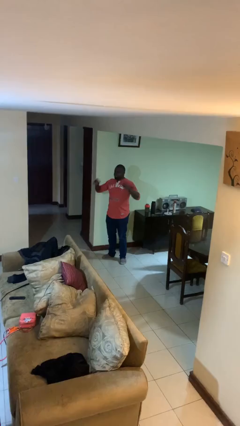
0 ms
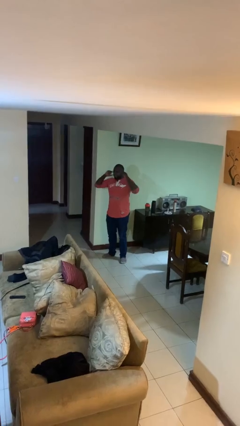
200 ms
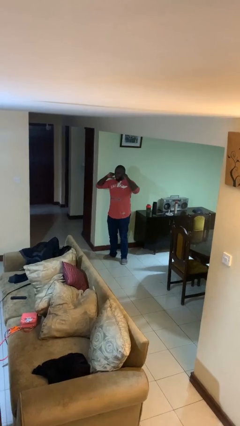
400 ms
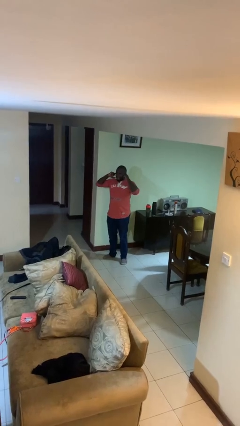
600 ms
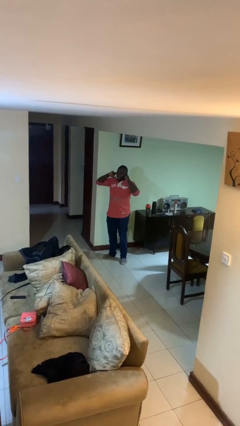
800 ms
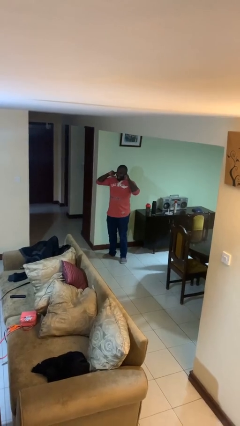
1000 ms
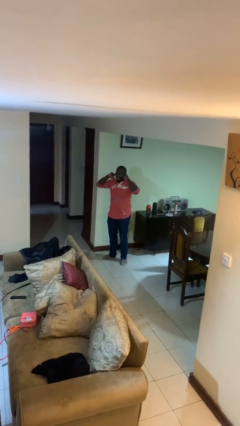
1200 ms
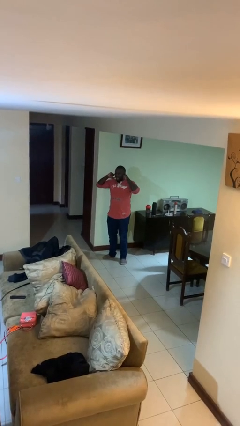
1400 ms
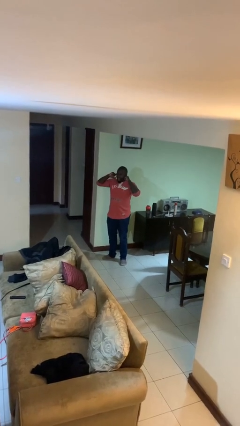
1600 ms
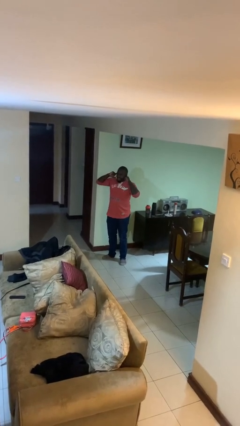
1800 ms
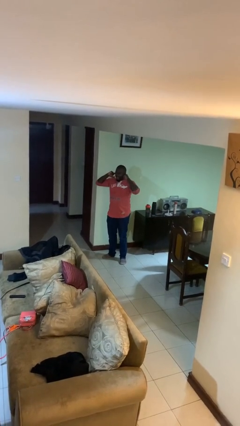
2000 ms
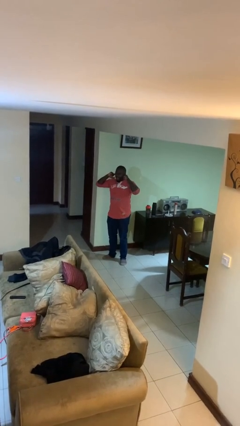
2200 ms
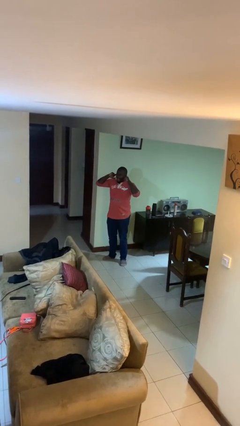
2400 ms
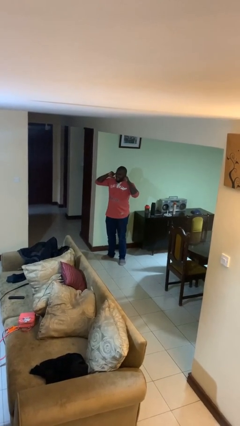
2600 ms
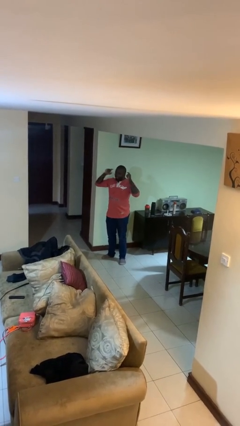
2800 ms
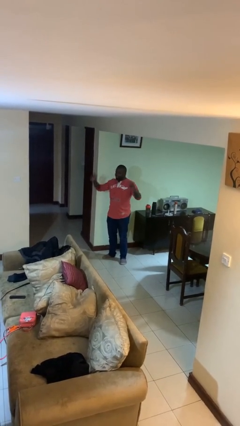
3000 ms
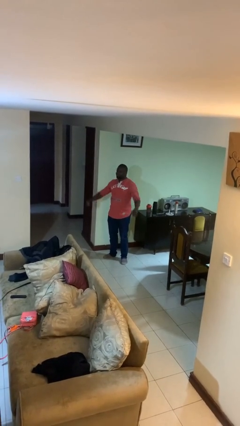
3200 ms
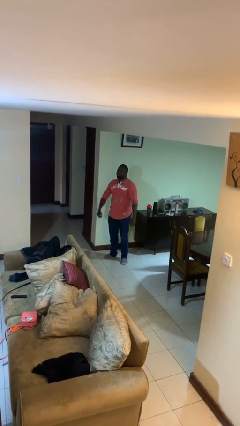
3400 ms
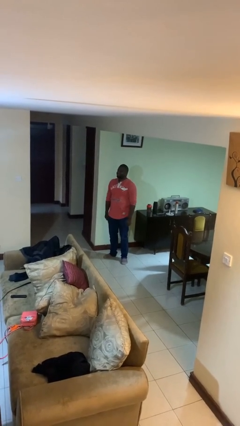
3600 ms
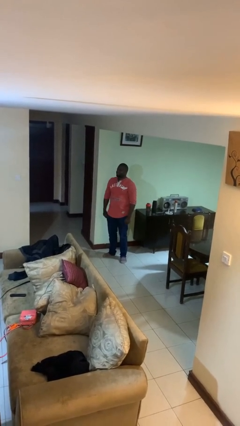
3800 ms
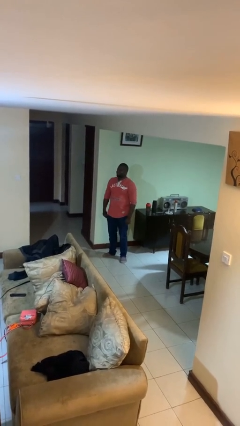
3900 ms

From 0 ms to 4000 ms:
person puts fingers in ear

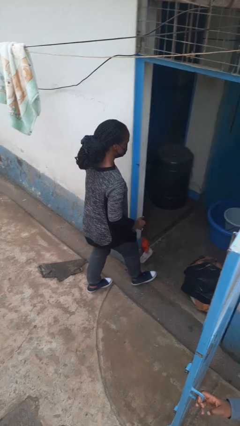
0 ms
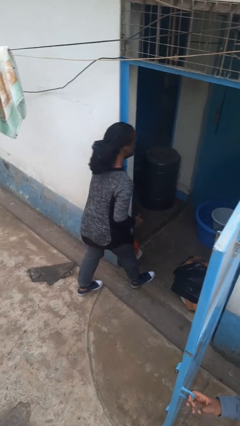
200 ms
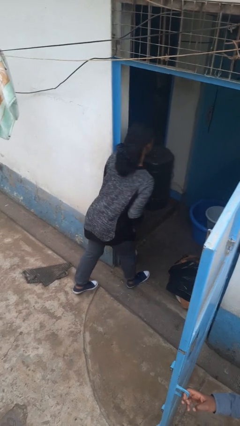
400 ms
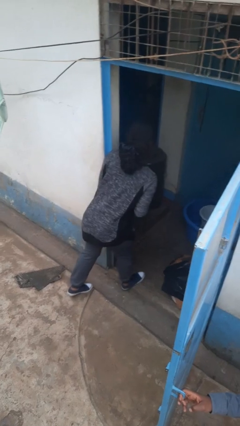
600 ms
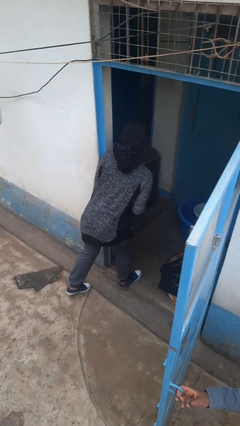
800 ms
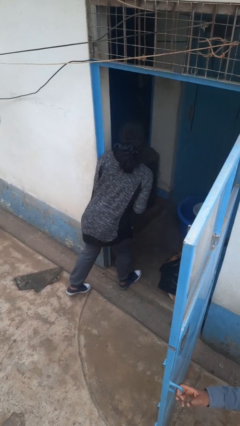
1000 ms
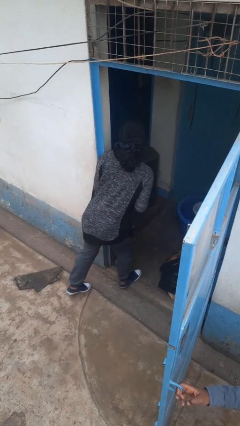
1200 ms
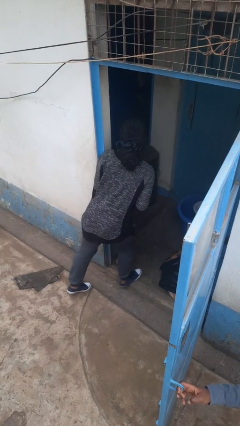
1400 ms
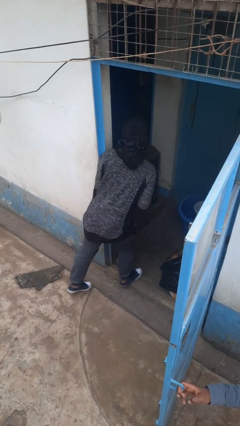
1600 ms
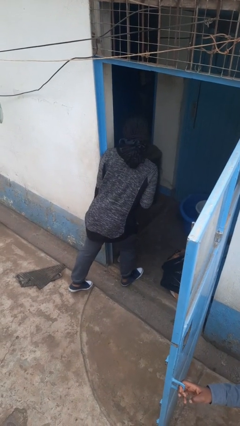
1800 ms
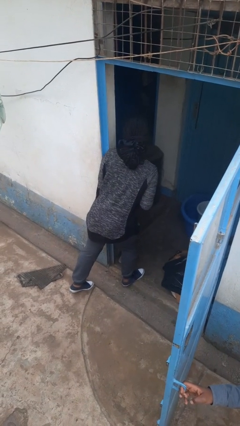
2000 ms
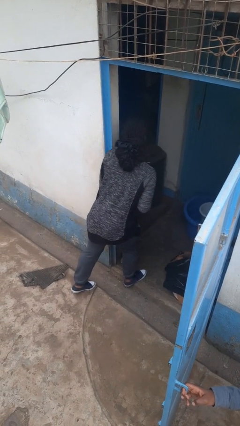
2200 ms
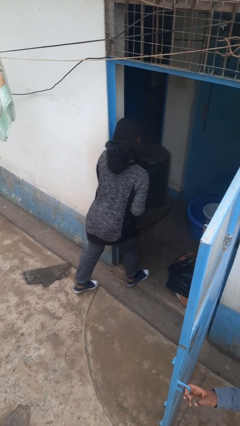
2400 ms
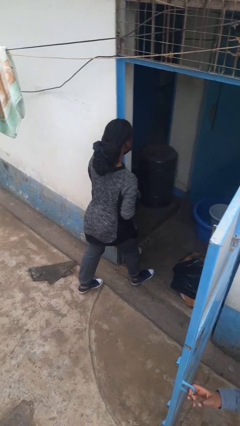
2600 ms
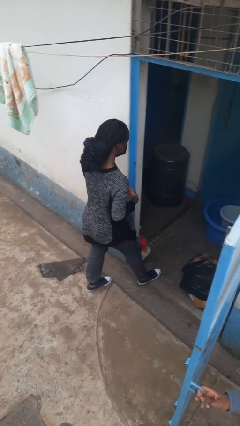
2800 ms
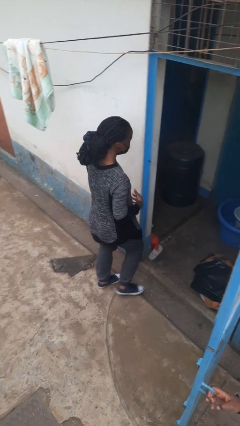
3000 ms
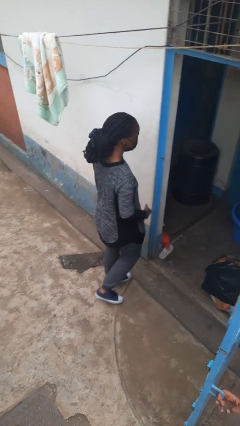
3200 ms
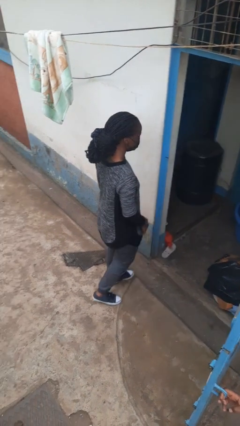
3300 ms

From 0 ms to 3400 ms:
person bumps into wall

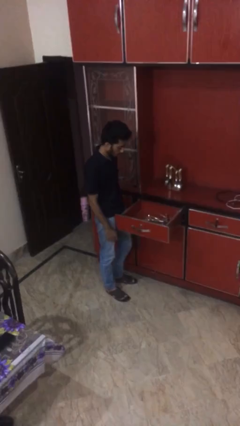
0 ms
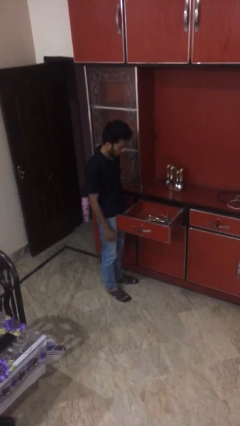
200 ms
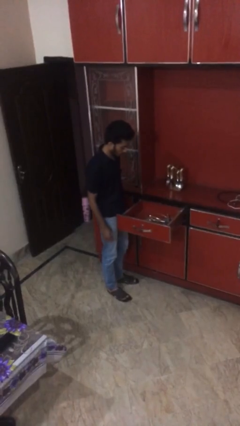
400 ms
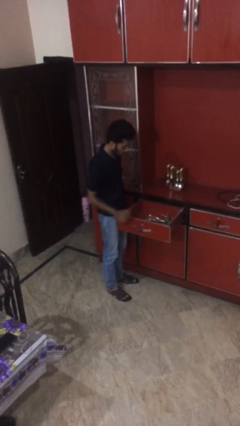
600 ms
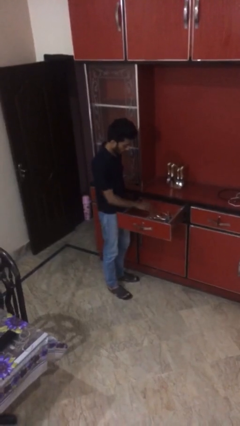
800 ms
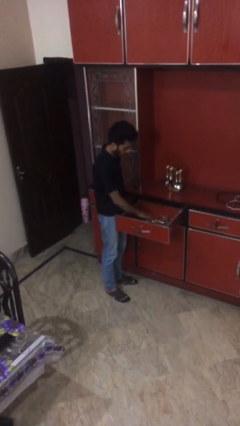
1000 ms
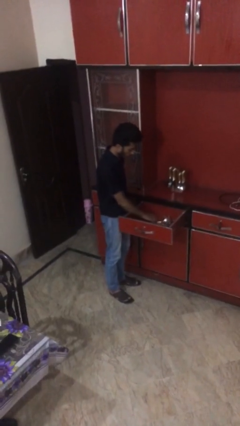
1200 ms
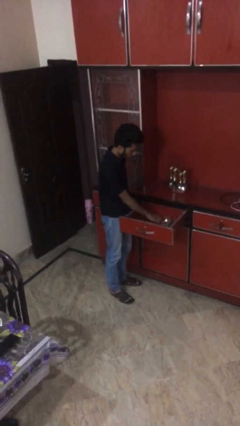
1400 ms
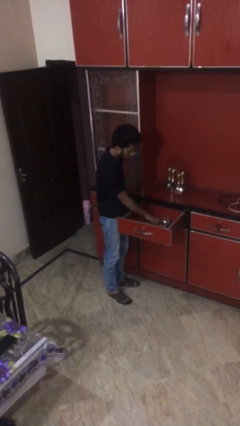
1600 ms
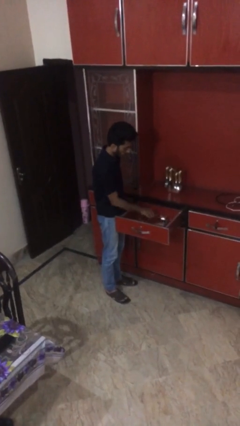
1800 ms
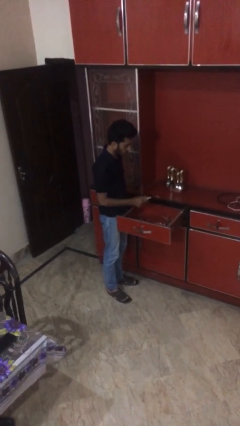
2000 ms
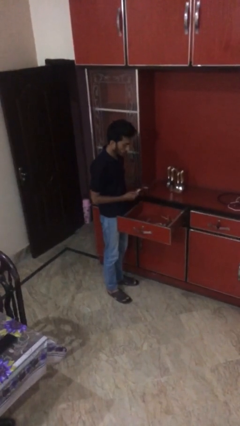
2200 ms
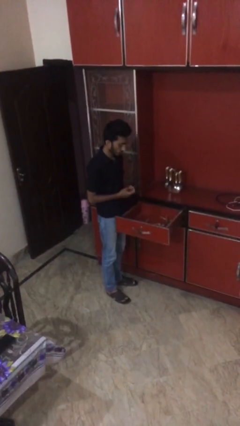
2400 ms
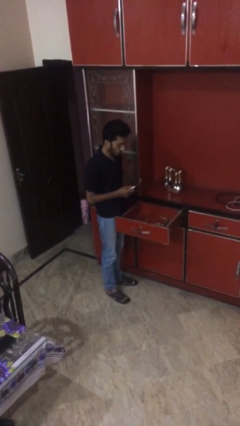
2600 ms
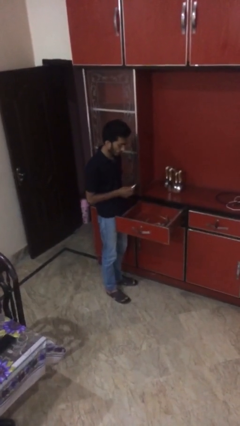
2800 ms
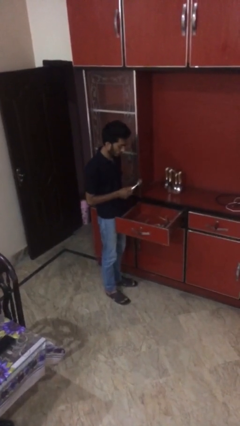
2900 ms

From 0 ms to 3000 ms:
person takes object from kitchen drawer

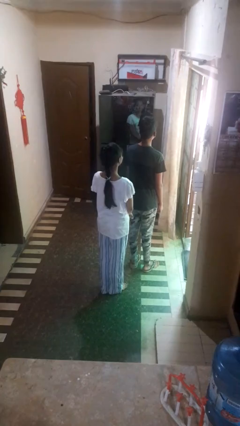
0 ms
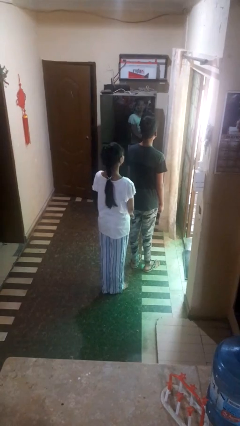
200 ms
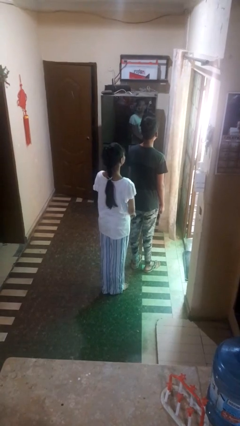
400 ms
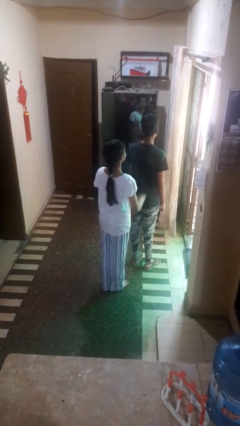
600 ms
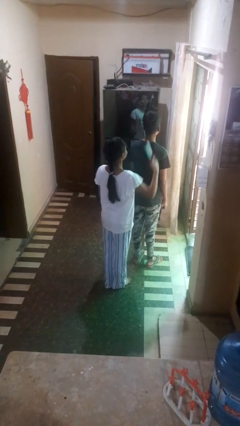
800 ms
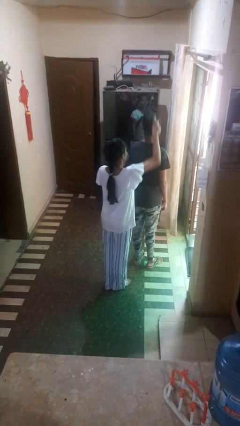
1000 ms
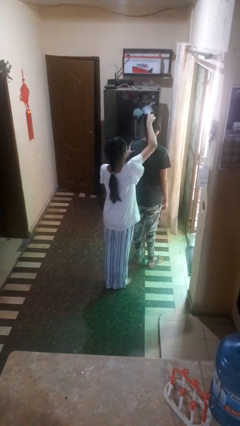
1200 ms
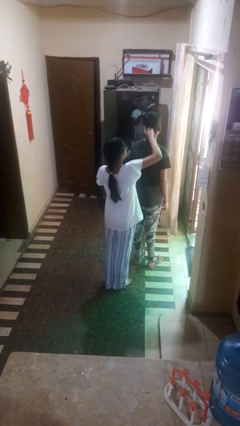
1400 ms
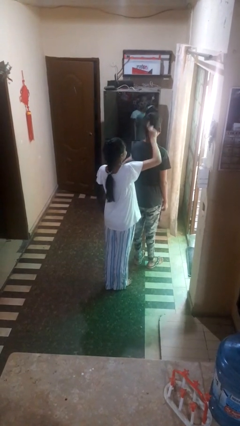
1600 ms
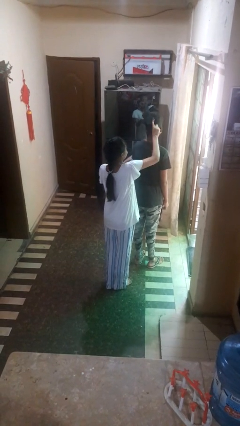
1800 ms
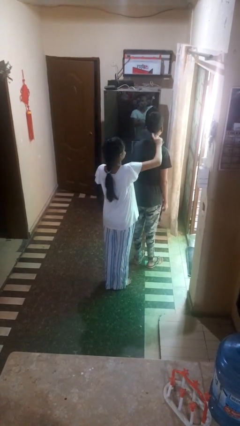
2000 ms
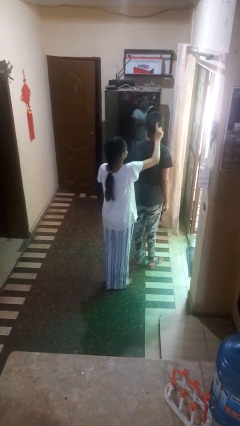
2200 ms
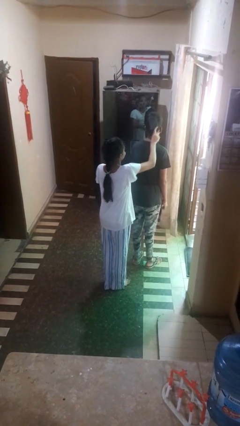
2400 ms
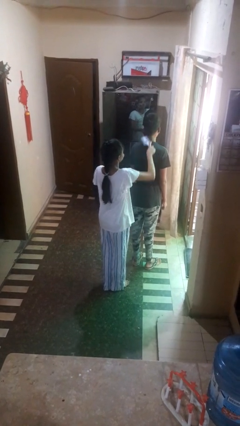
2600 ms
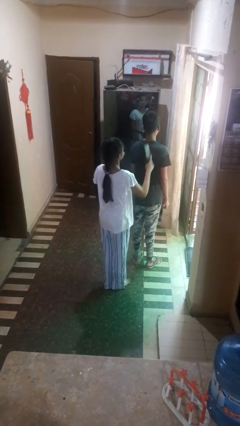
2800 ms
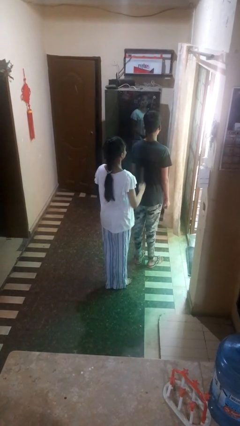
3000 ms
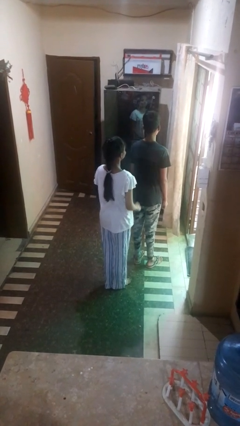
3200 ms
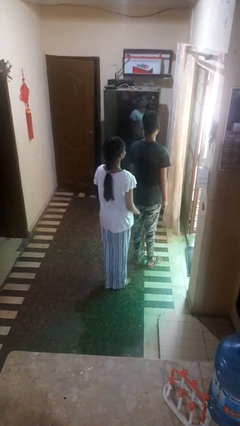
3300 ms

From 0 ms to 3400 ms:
person brushes hair of person

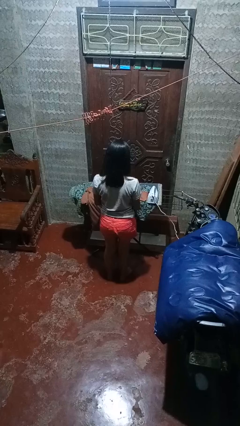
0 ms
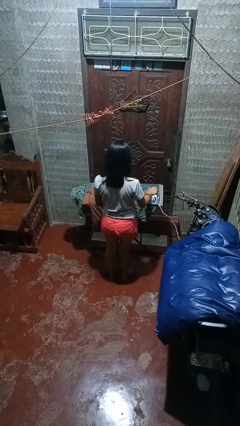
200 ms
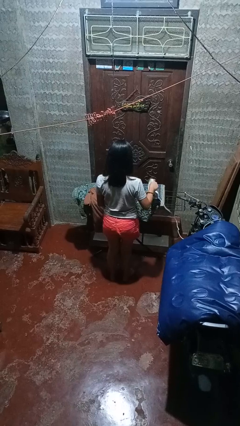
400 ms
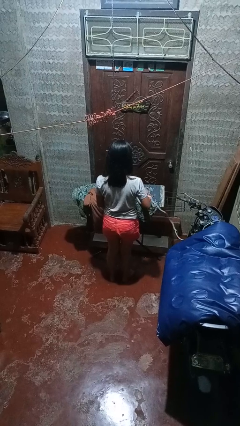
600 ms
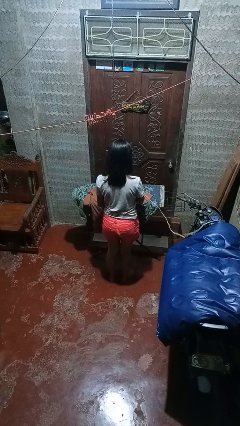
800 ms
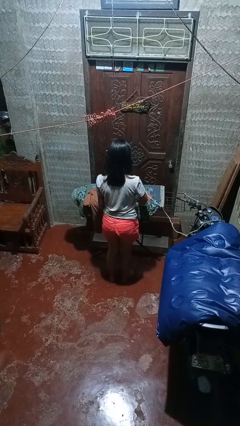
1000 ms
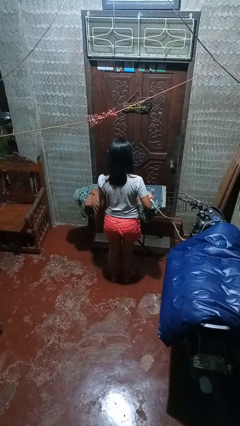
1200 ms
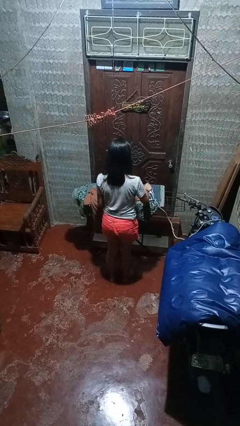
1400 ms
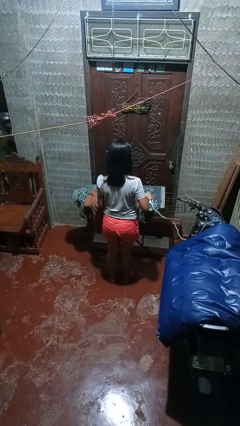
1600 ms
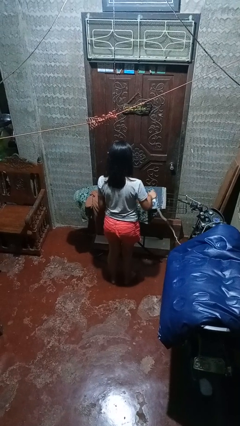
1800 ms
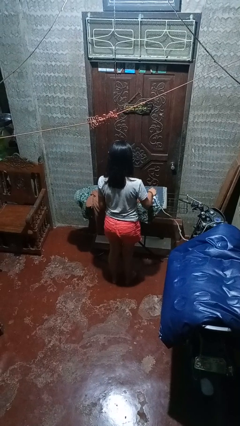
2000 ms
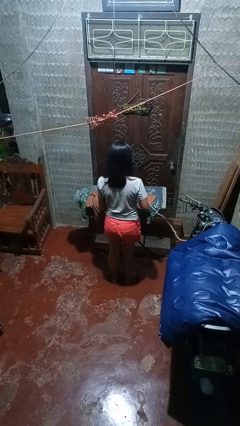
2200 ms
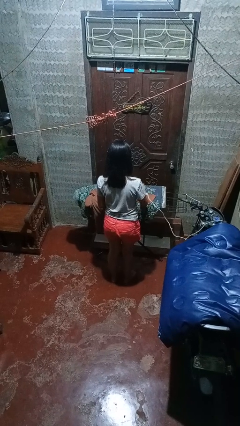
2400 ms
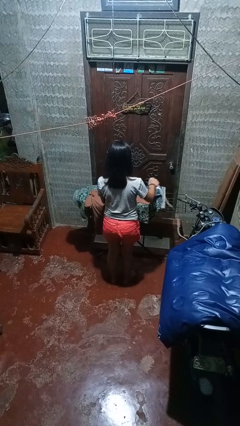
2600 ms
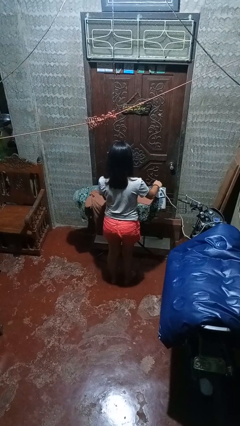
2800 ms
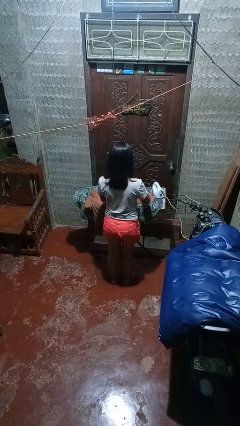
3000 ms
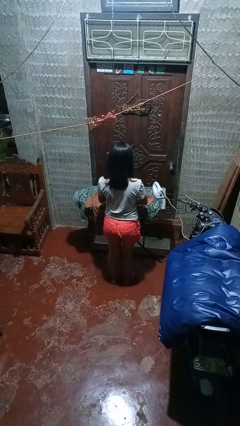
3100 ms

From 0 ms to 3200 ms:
person irons clothes

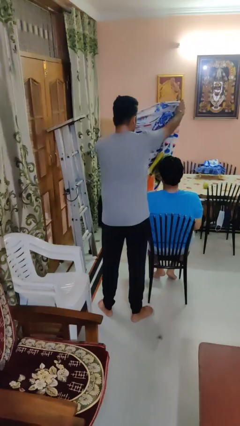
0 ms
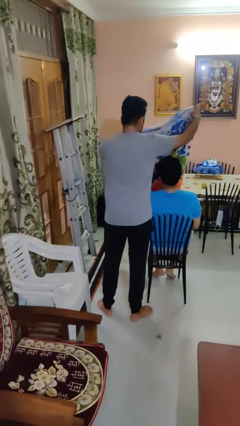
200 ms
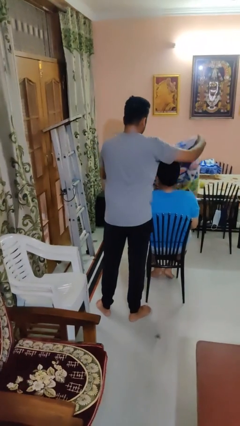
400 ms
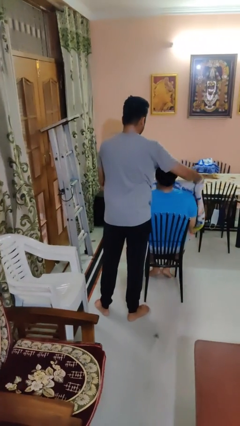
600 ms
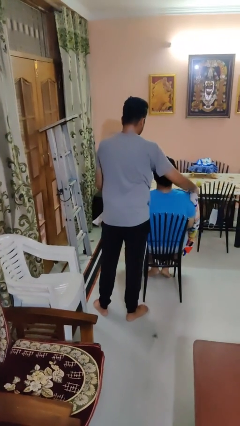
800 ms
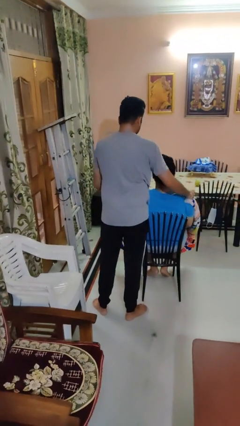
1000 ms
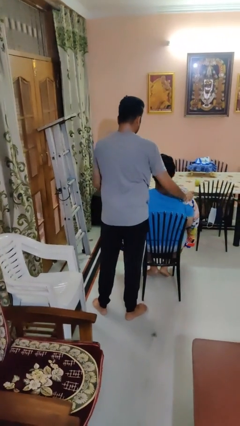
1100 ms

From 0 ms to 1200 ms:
person covers friend with blanket
